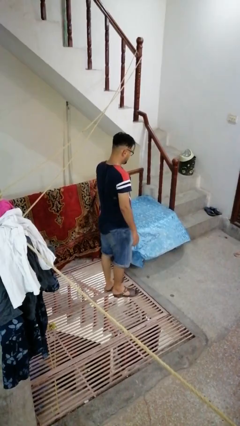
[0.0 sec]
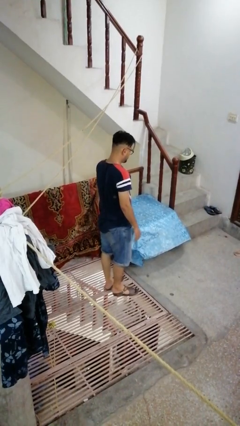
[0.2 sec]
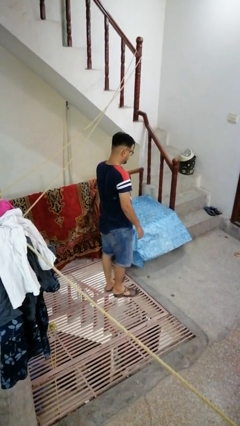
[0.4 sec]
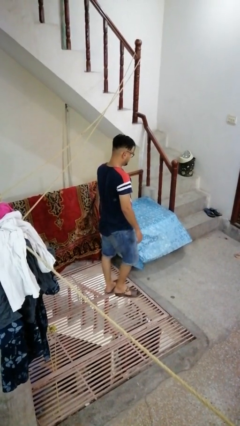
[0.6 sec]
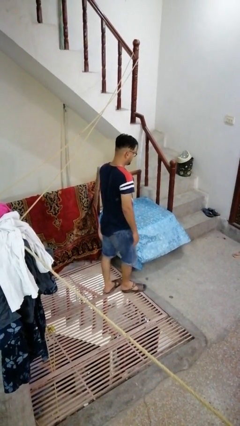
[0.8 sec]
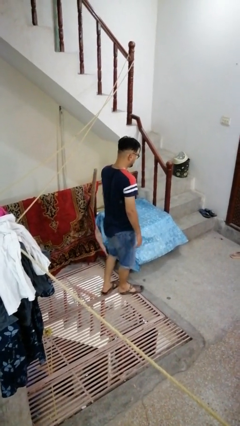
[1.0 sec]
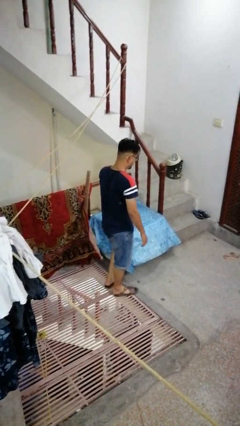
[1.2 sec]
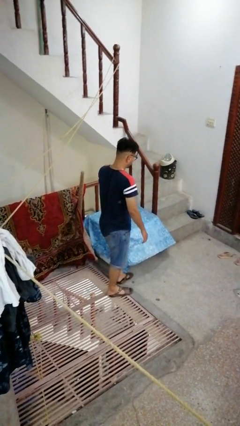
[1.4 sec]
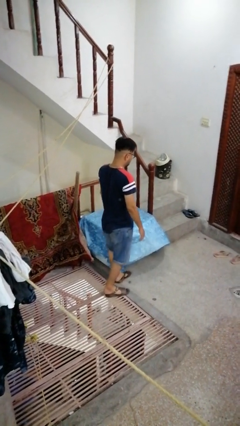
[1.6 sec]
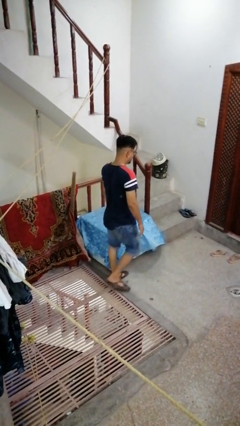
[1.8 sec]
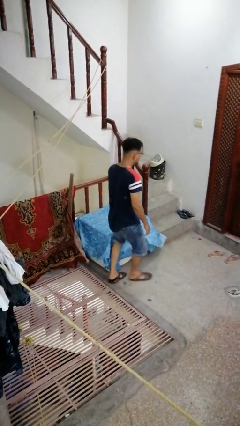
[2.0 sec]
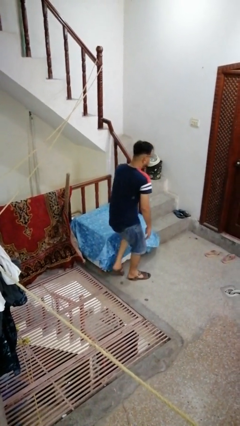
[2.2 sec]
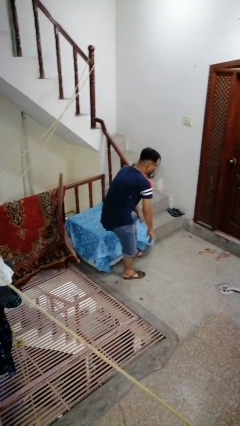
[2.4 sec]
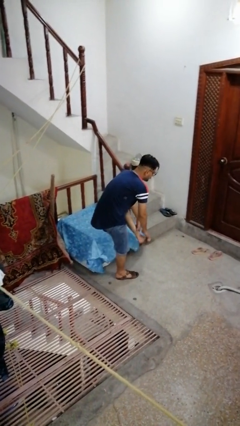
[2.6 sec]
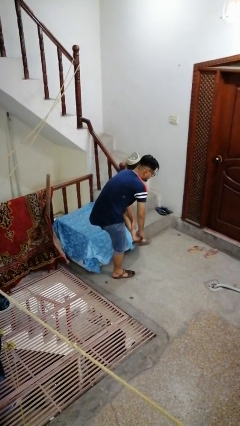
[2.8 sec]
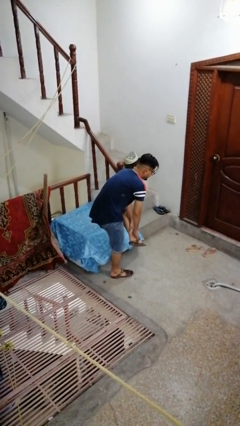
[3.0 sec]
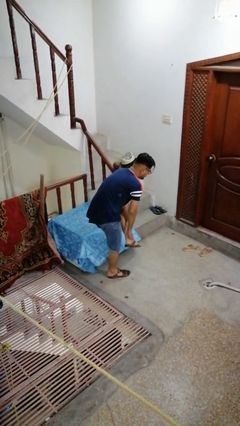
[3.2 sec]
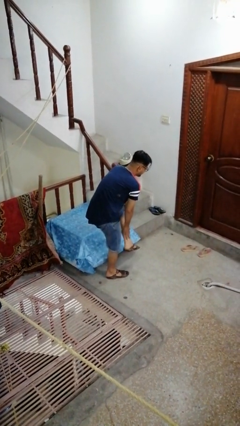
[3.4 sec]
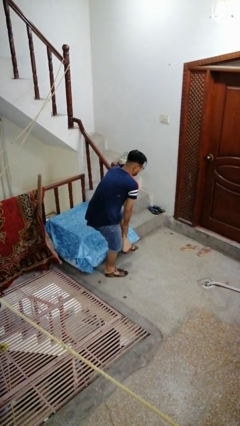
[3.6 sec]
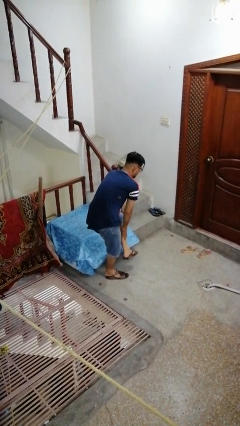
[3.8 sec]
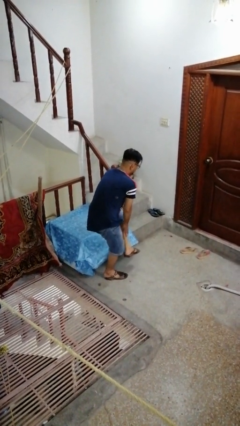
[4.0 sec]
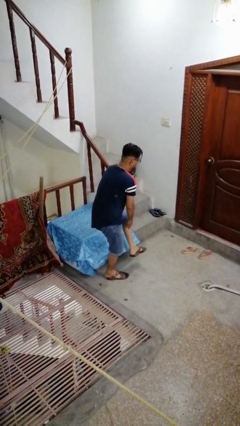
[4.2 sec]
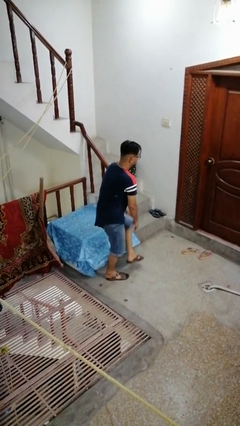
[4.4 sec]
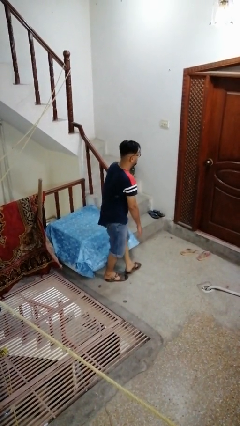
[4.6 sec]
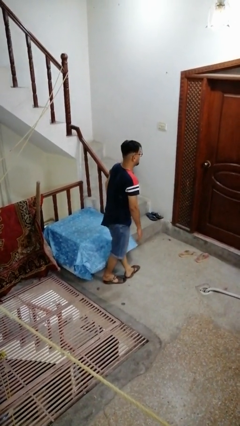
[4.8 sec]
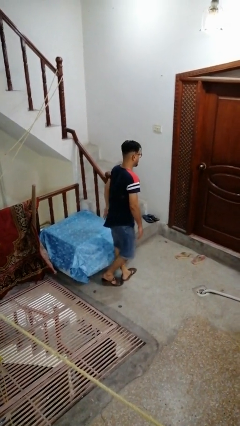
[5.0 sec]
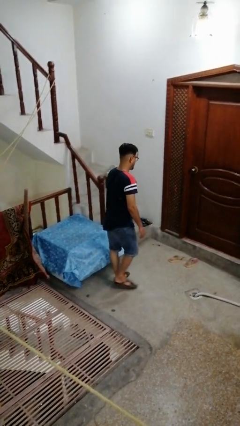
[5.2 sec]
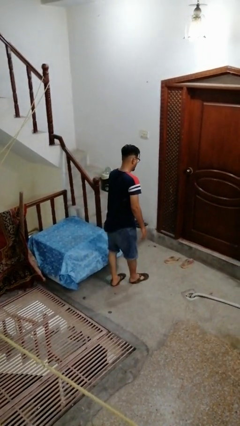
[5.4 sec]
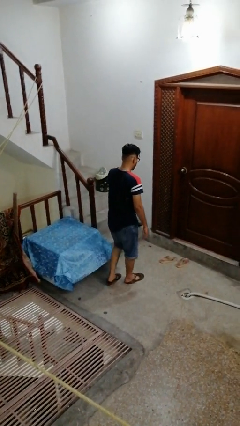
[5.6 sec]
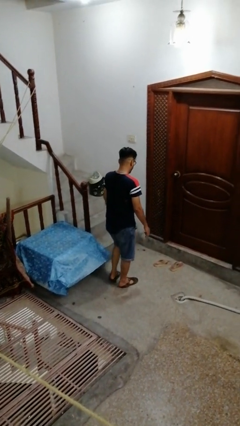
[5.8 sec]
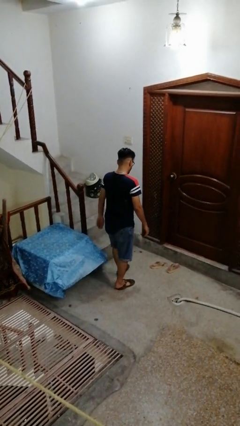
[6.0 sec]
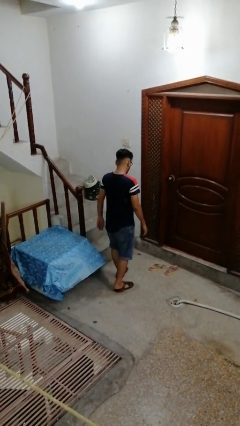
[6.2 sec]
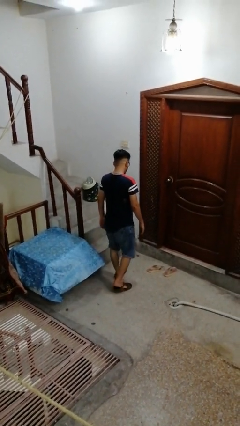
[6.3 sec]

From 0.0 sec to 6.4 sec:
person bumps into table

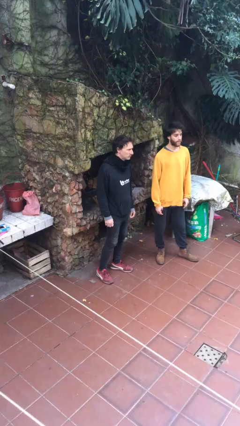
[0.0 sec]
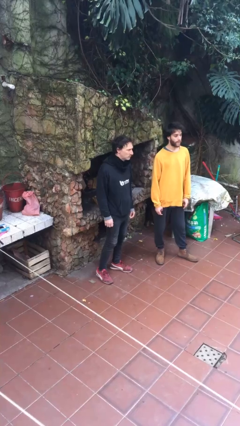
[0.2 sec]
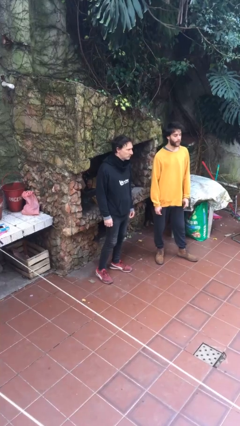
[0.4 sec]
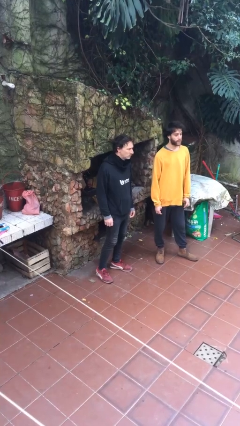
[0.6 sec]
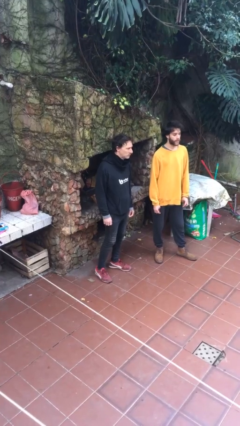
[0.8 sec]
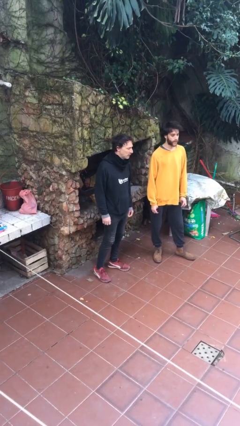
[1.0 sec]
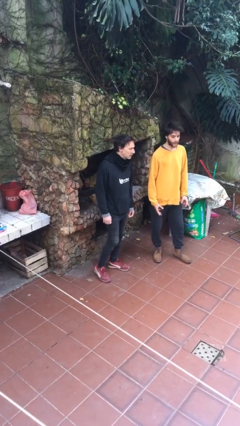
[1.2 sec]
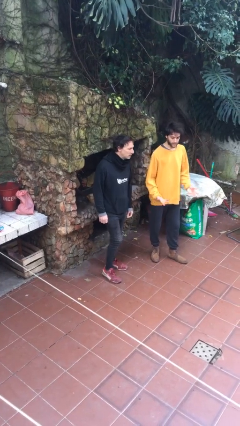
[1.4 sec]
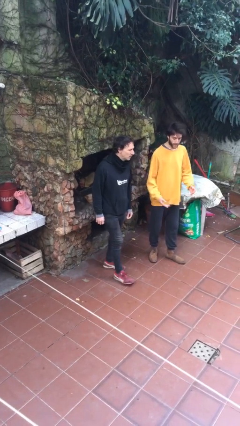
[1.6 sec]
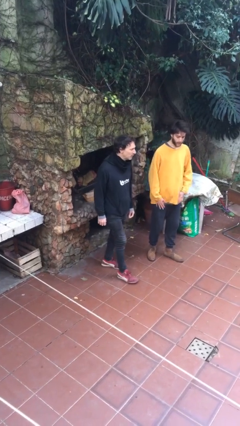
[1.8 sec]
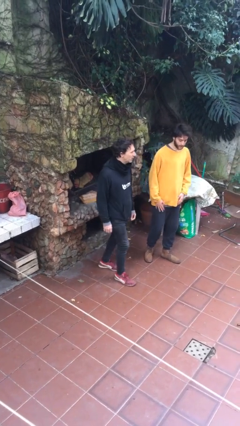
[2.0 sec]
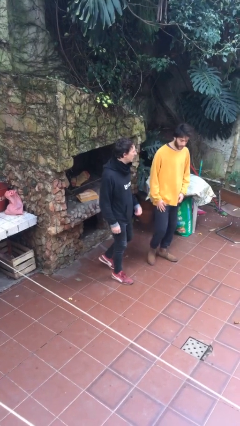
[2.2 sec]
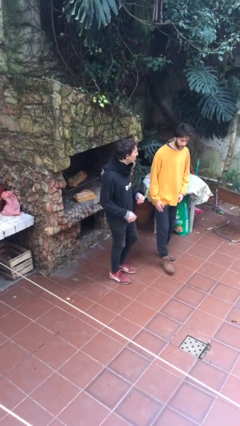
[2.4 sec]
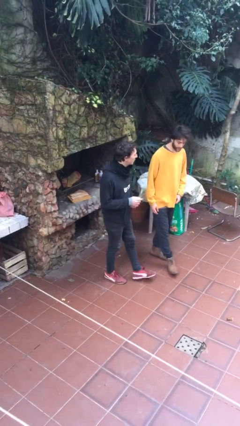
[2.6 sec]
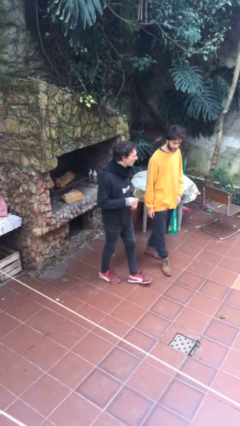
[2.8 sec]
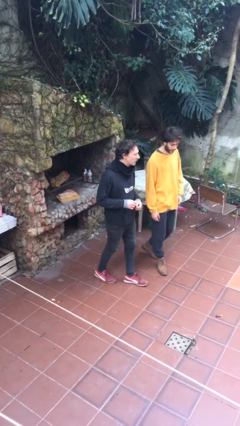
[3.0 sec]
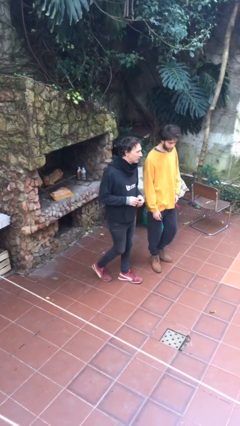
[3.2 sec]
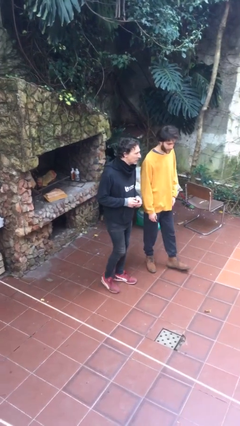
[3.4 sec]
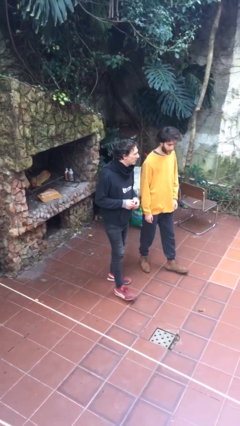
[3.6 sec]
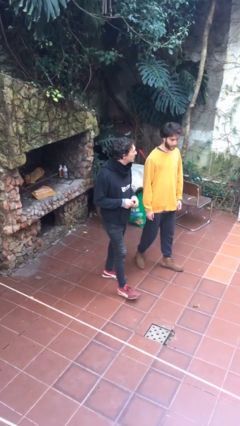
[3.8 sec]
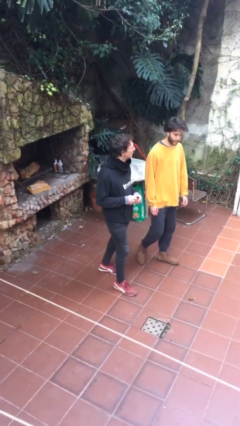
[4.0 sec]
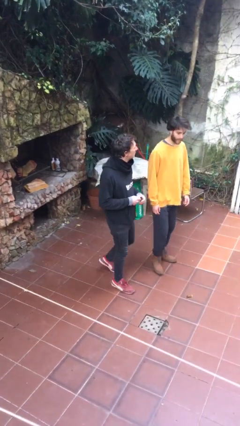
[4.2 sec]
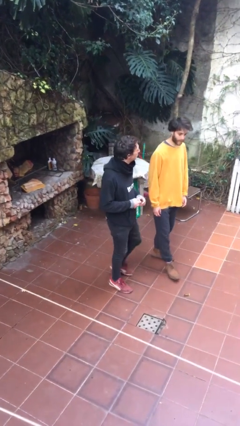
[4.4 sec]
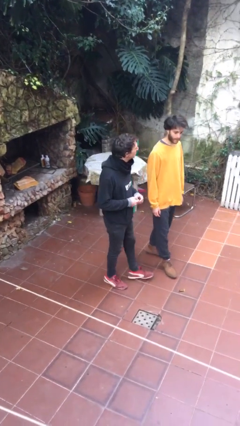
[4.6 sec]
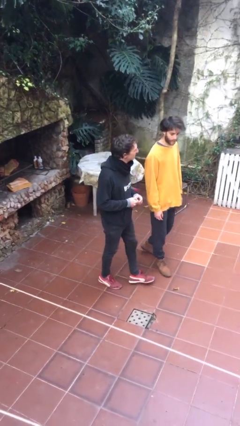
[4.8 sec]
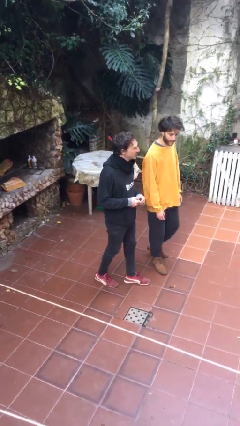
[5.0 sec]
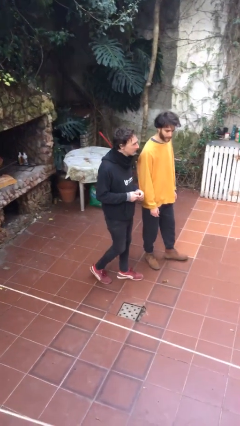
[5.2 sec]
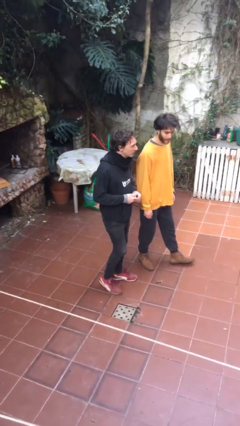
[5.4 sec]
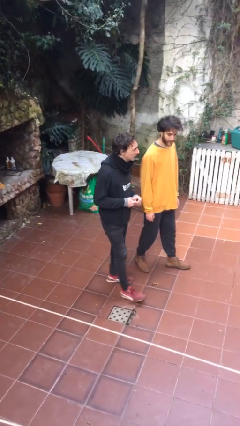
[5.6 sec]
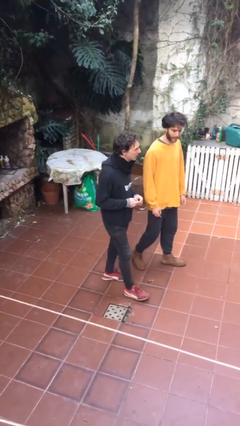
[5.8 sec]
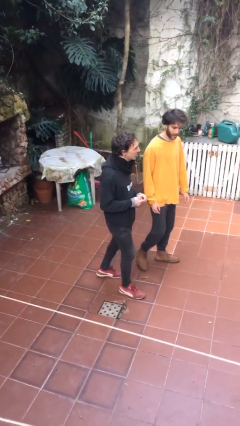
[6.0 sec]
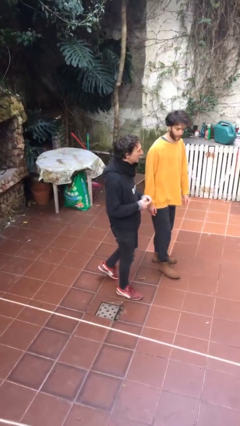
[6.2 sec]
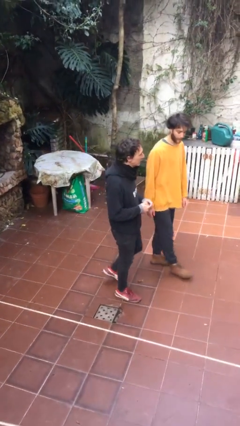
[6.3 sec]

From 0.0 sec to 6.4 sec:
person talks to person

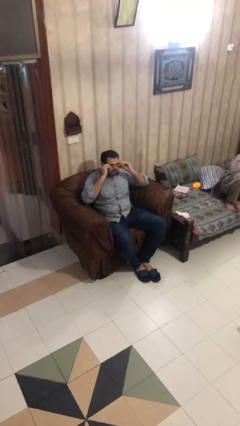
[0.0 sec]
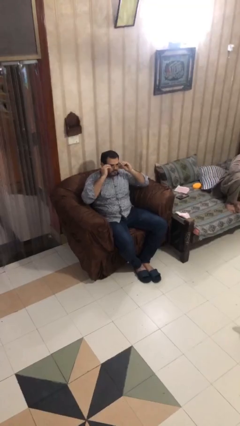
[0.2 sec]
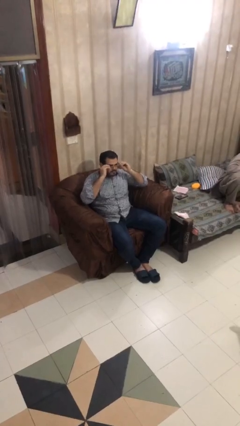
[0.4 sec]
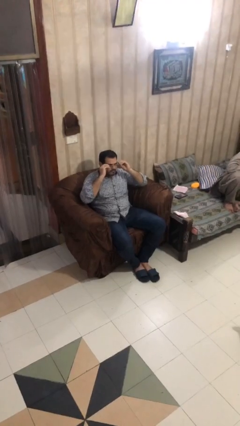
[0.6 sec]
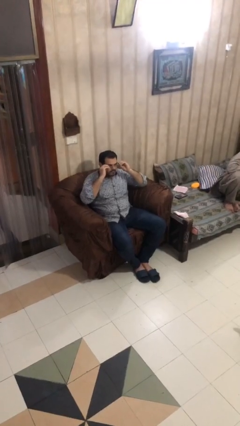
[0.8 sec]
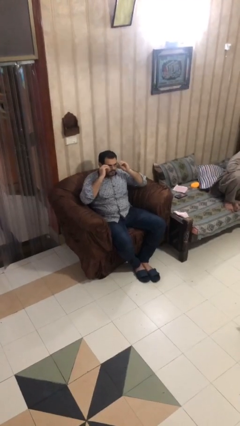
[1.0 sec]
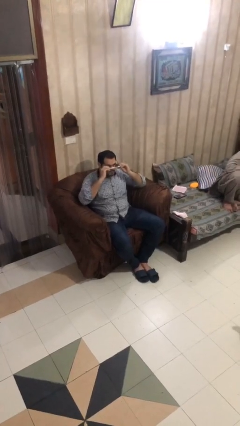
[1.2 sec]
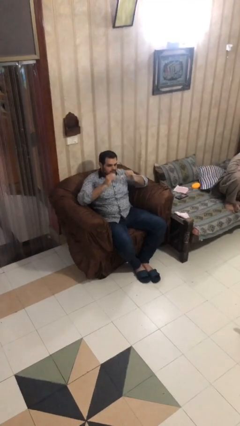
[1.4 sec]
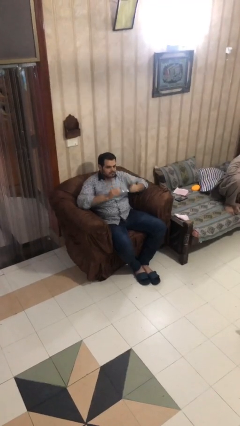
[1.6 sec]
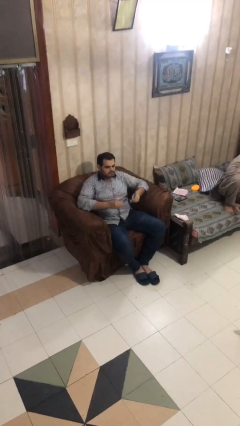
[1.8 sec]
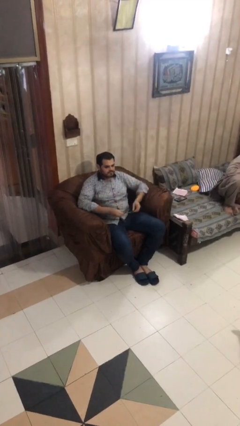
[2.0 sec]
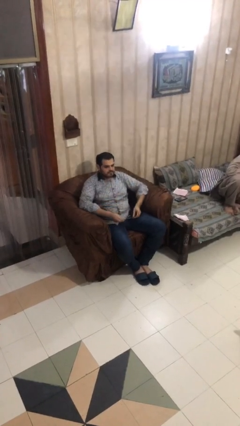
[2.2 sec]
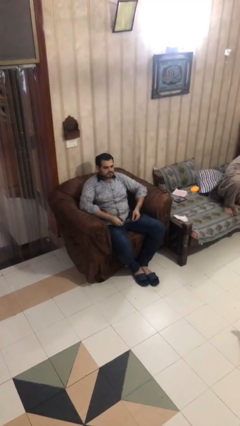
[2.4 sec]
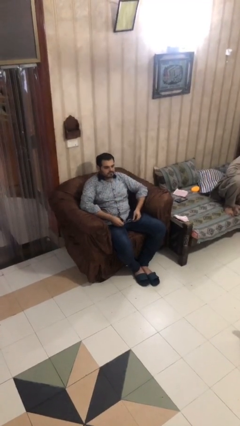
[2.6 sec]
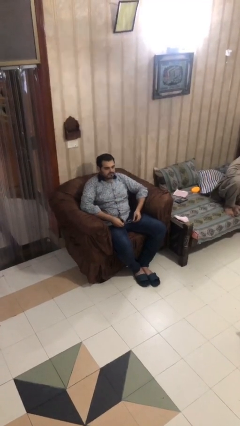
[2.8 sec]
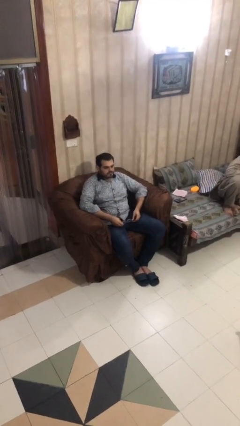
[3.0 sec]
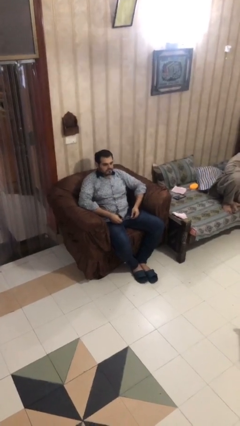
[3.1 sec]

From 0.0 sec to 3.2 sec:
person takes off glasses

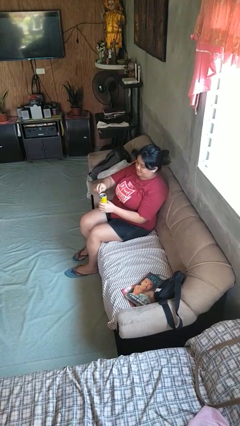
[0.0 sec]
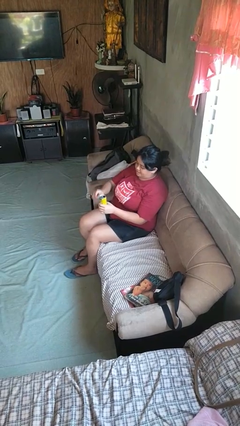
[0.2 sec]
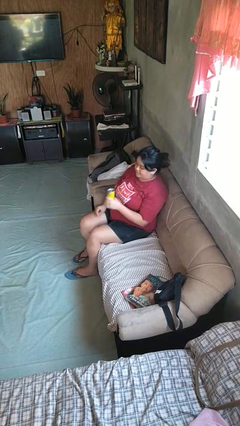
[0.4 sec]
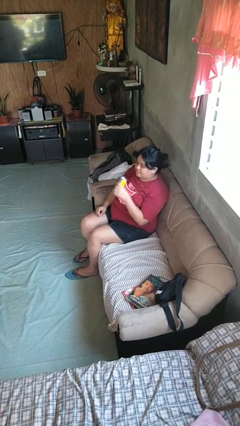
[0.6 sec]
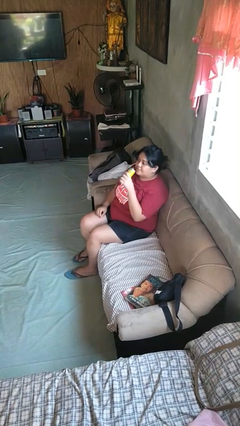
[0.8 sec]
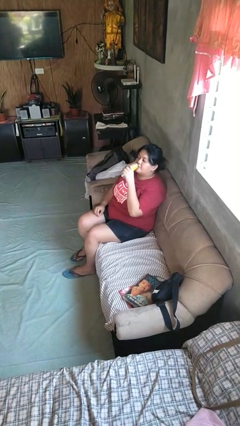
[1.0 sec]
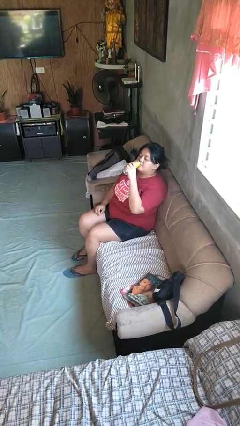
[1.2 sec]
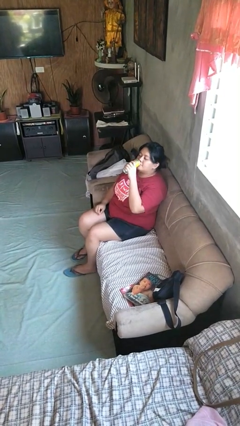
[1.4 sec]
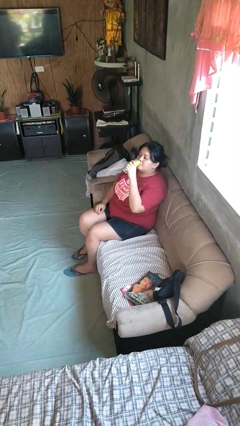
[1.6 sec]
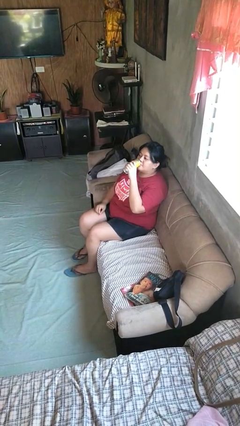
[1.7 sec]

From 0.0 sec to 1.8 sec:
person drinks from beverage can
